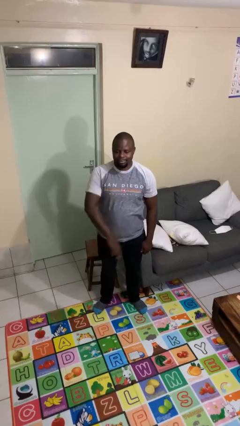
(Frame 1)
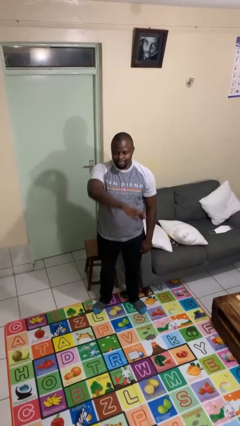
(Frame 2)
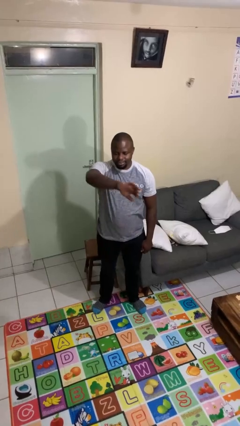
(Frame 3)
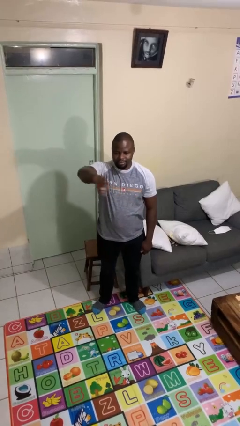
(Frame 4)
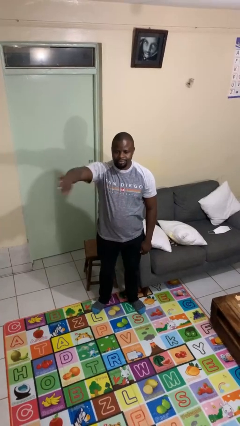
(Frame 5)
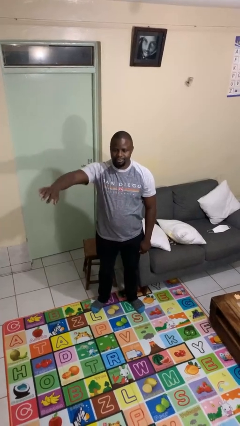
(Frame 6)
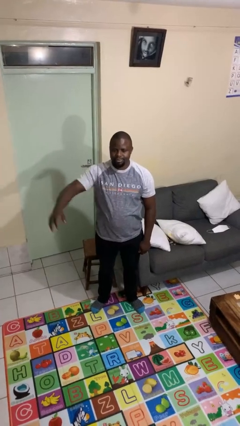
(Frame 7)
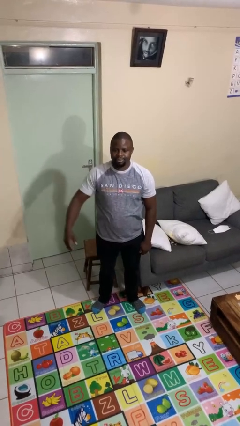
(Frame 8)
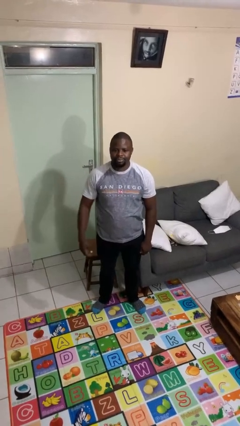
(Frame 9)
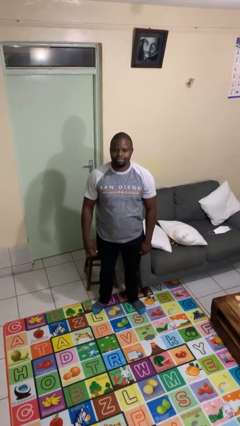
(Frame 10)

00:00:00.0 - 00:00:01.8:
person gestures swipe right

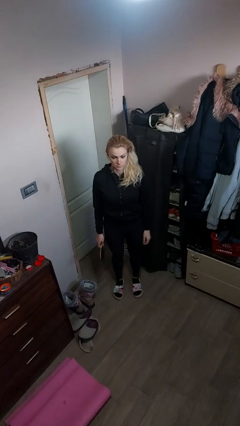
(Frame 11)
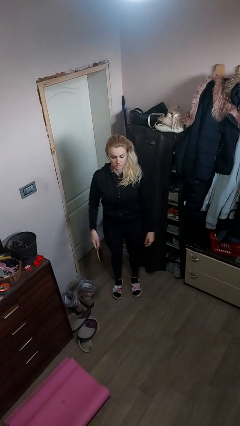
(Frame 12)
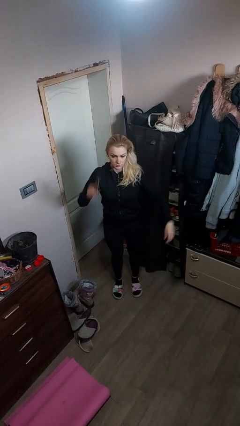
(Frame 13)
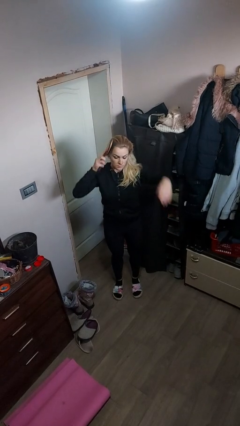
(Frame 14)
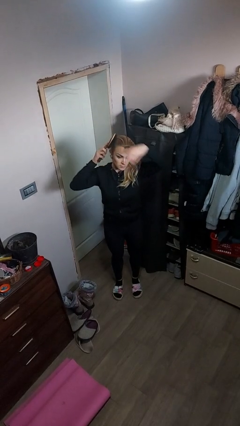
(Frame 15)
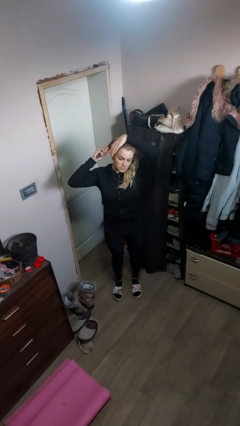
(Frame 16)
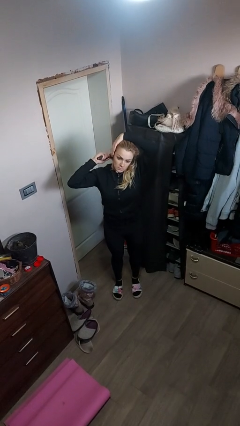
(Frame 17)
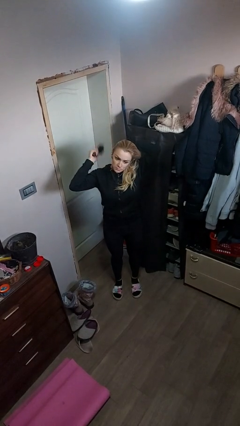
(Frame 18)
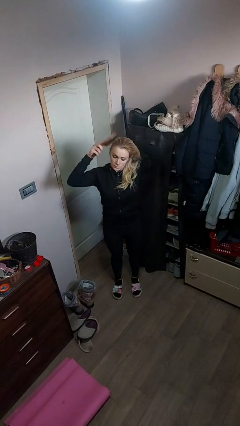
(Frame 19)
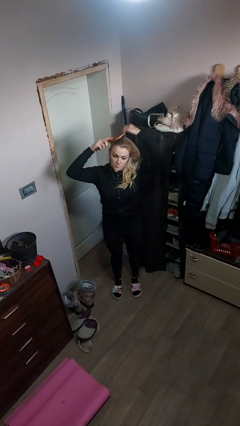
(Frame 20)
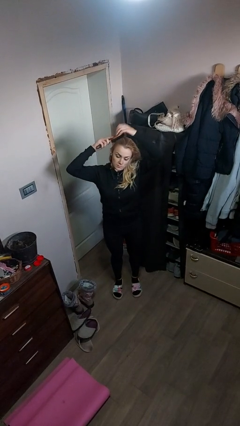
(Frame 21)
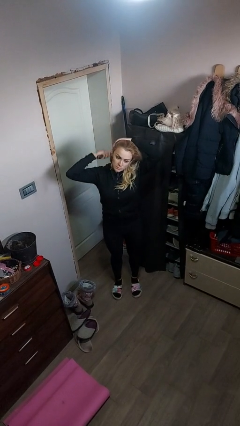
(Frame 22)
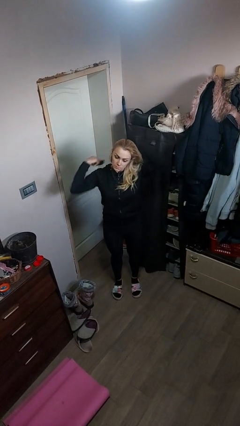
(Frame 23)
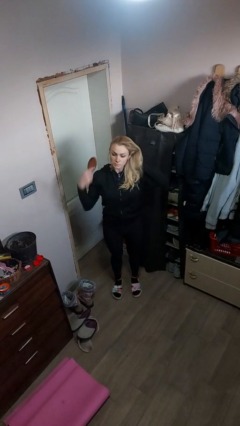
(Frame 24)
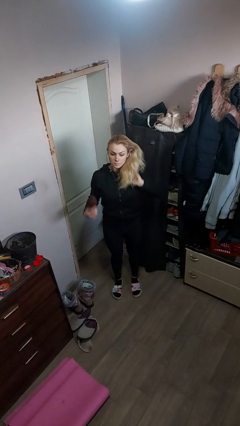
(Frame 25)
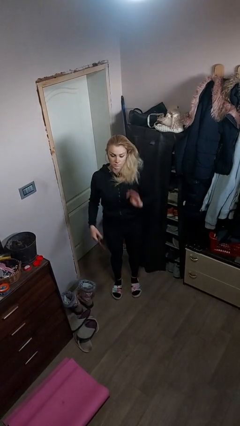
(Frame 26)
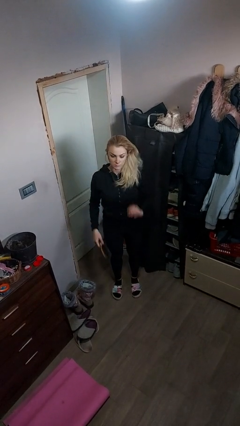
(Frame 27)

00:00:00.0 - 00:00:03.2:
person brushes hair

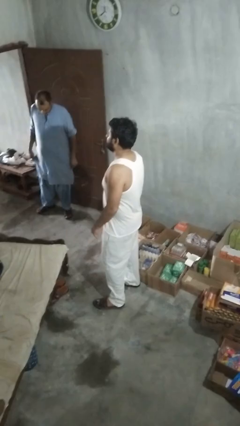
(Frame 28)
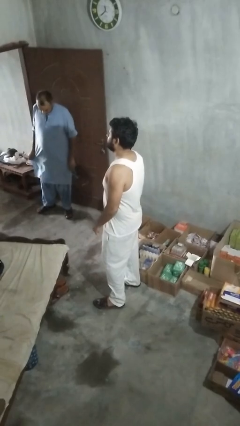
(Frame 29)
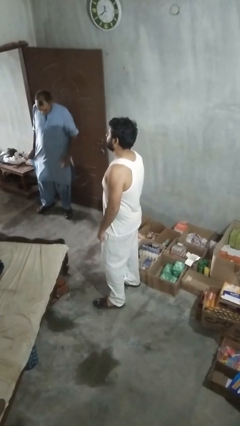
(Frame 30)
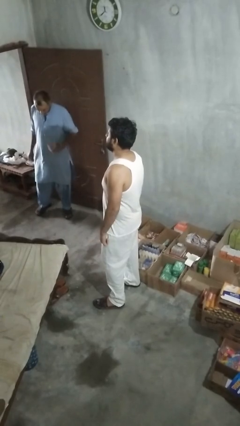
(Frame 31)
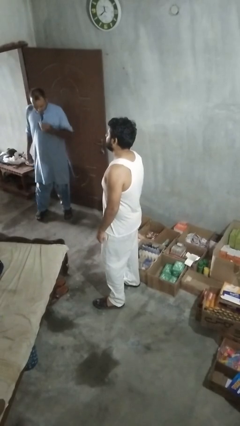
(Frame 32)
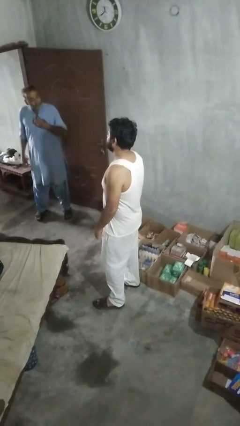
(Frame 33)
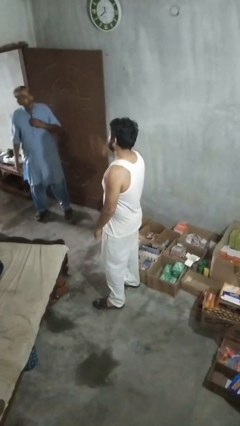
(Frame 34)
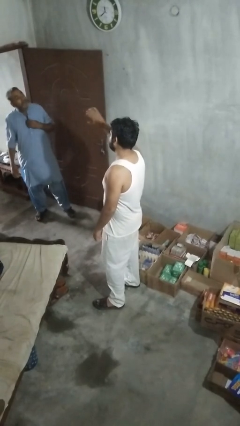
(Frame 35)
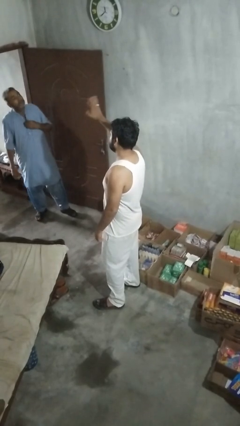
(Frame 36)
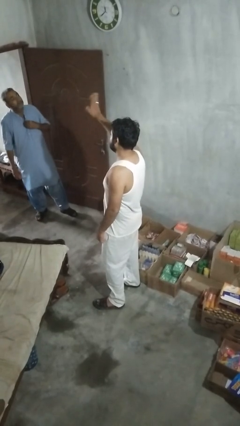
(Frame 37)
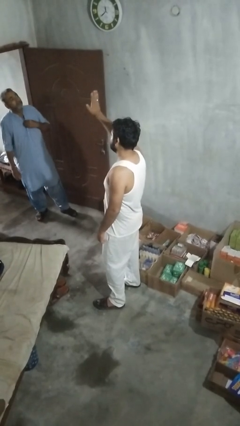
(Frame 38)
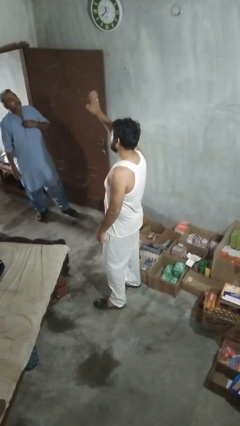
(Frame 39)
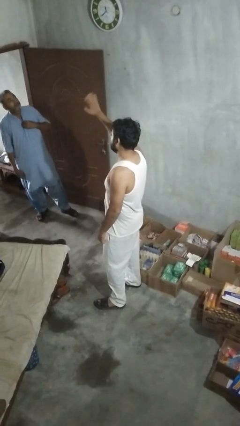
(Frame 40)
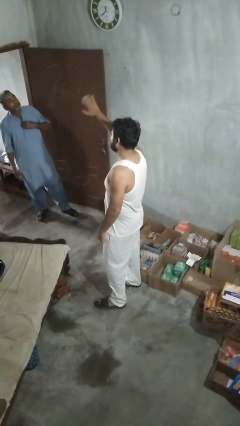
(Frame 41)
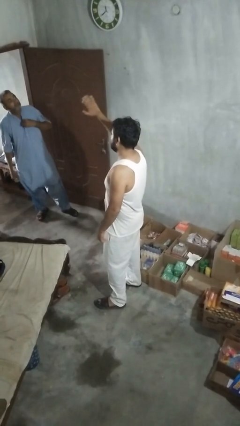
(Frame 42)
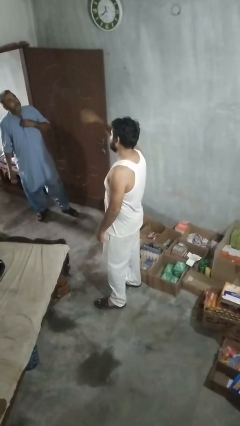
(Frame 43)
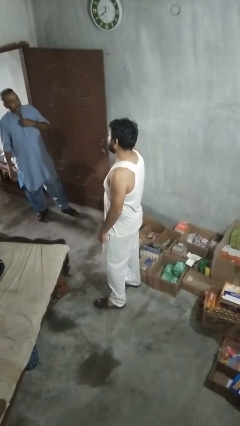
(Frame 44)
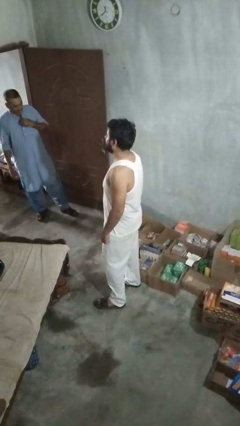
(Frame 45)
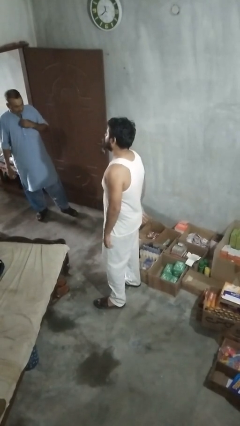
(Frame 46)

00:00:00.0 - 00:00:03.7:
person waves at person

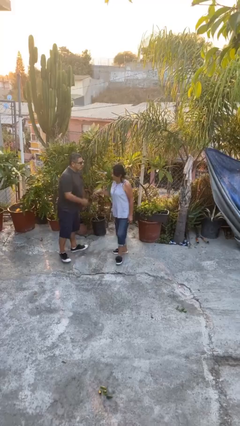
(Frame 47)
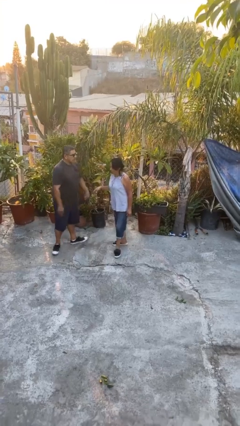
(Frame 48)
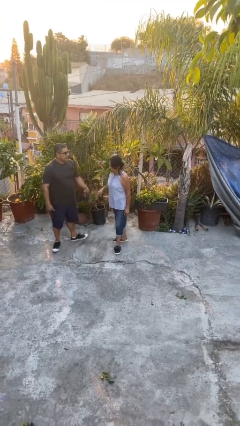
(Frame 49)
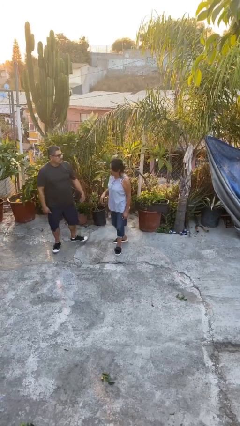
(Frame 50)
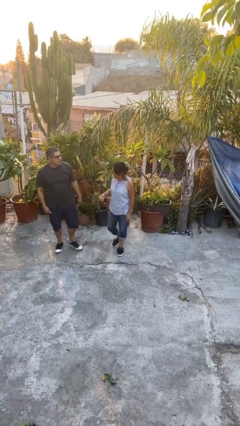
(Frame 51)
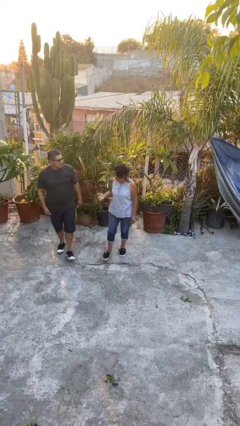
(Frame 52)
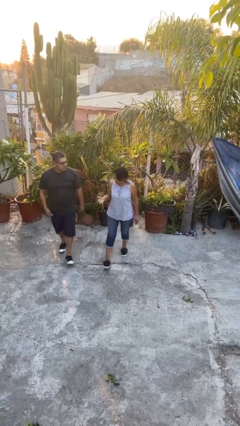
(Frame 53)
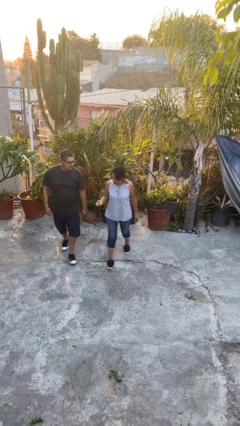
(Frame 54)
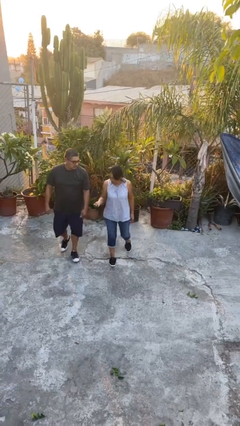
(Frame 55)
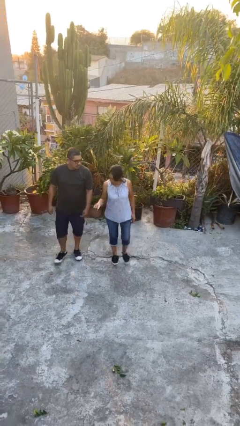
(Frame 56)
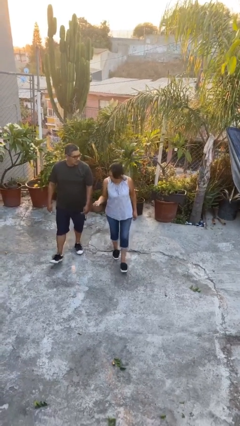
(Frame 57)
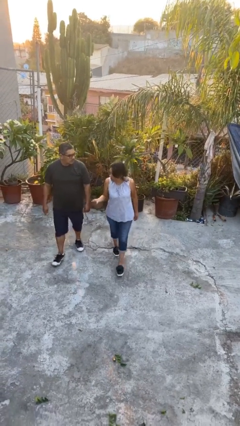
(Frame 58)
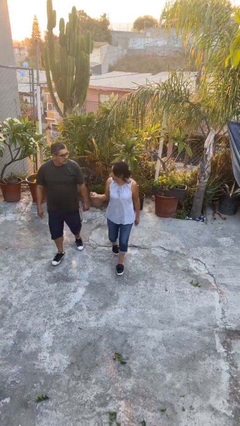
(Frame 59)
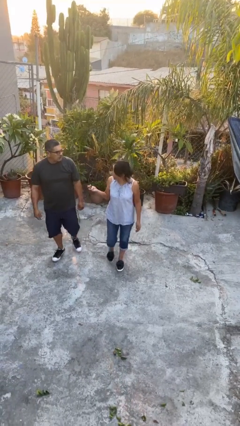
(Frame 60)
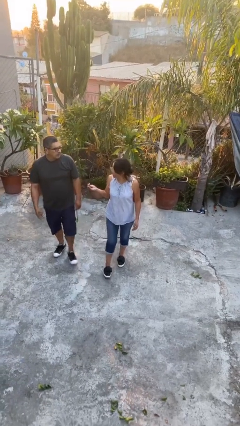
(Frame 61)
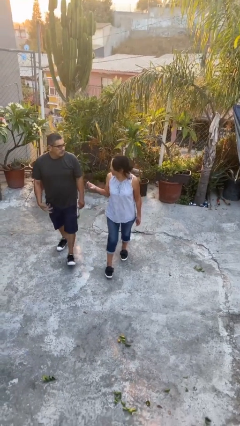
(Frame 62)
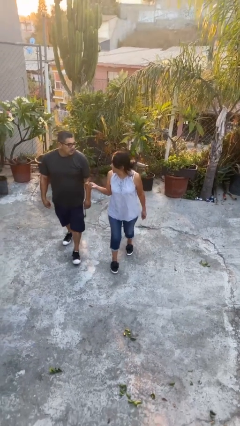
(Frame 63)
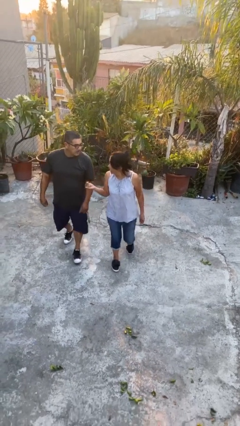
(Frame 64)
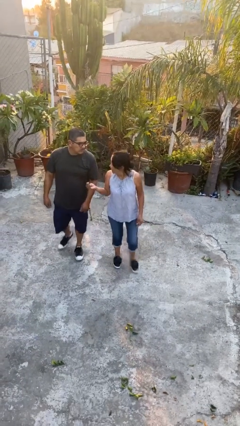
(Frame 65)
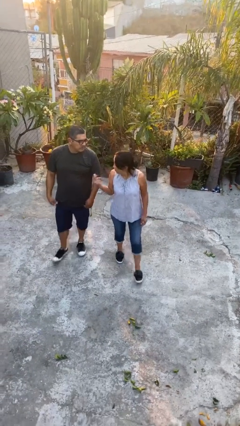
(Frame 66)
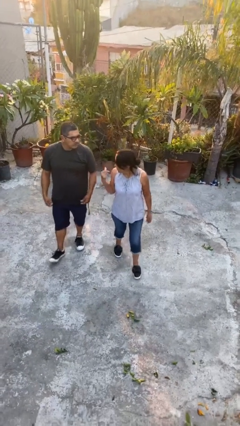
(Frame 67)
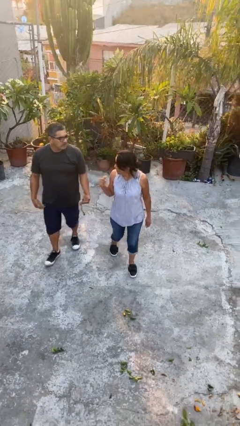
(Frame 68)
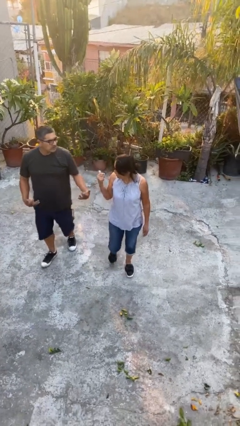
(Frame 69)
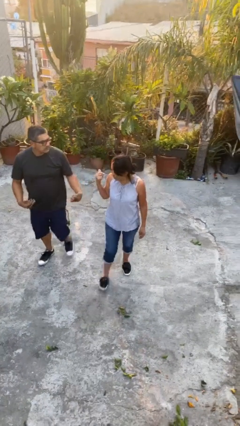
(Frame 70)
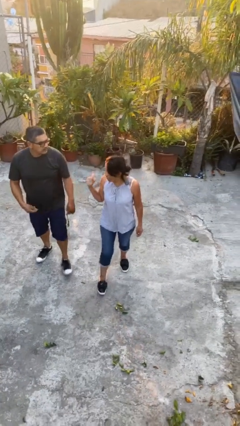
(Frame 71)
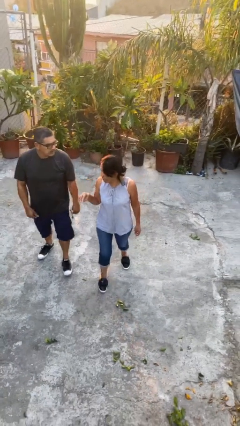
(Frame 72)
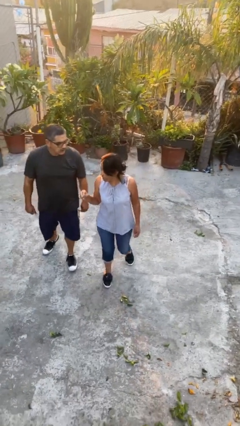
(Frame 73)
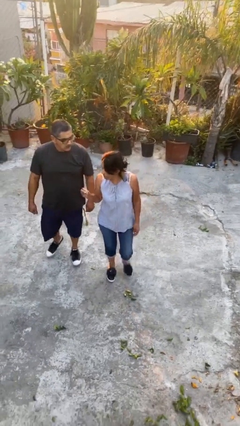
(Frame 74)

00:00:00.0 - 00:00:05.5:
person talks to person

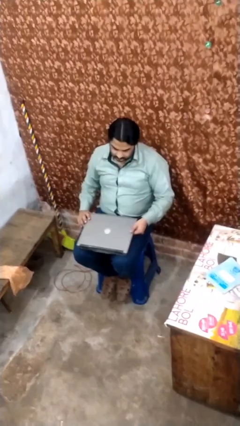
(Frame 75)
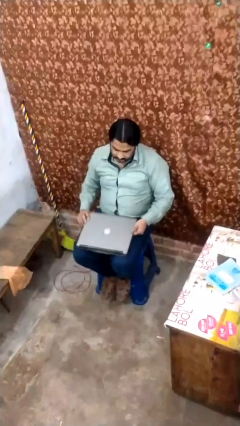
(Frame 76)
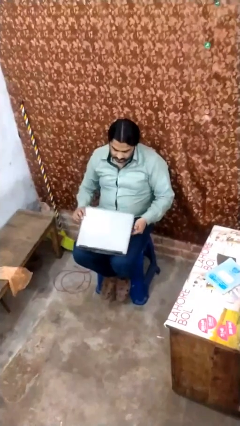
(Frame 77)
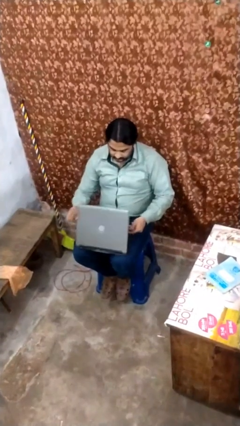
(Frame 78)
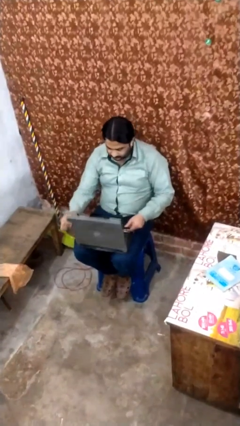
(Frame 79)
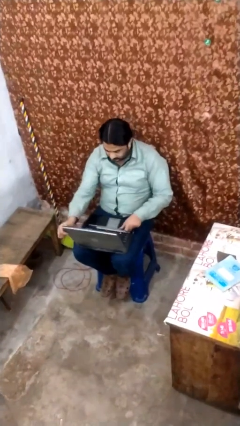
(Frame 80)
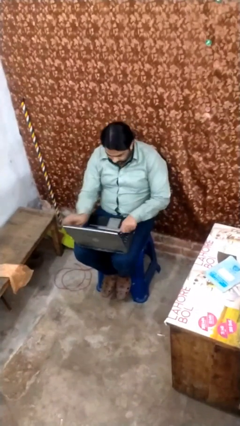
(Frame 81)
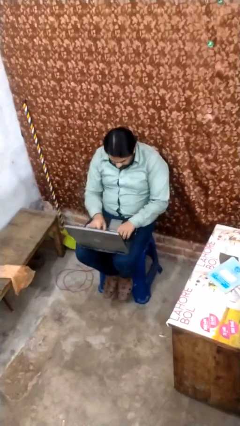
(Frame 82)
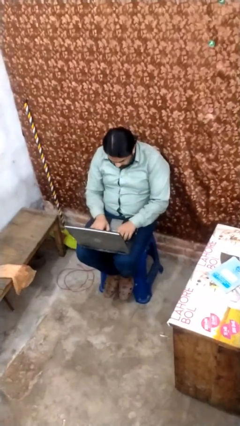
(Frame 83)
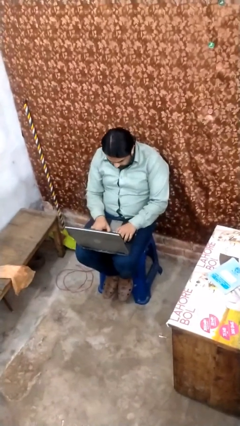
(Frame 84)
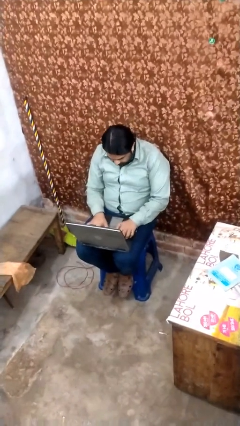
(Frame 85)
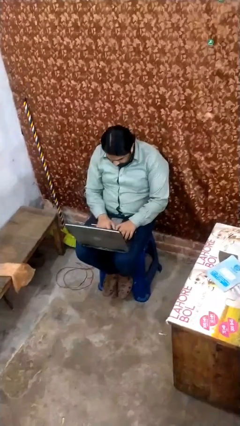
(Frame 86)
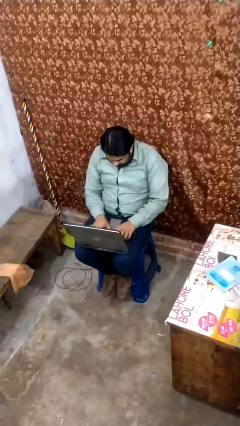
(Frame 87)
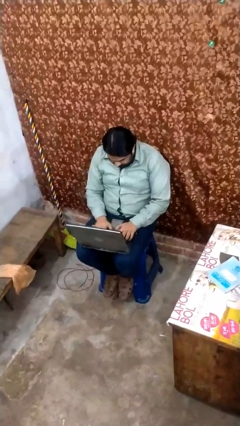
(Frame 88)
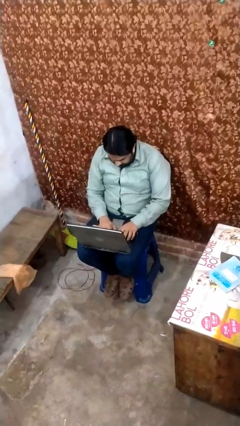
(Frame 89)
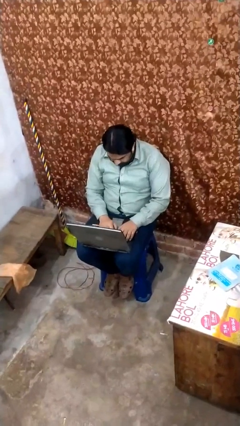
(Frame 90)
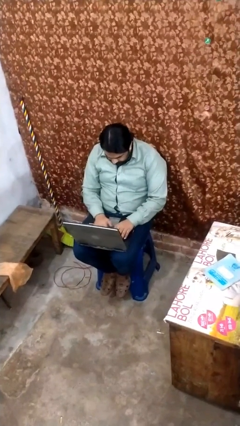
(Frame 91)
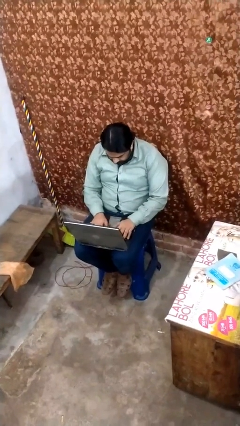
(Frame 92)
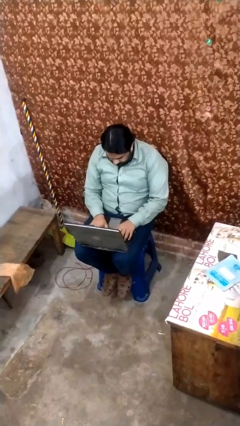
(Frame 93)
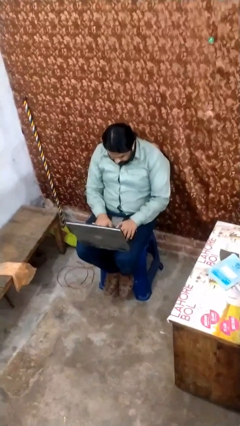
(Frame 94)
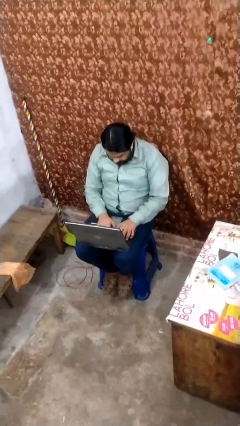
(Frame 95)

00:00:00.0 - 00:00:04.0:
person interacts with laptop
